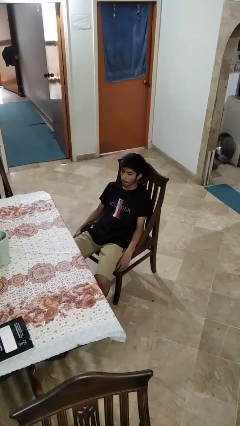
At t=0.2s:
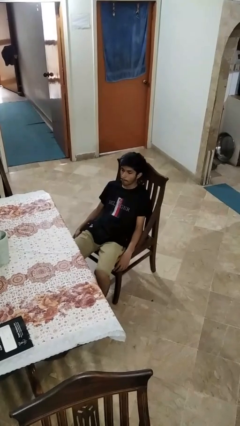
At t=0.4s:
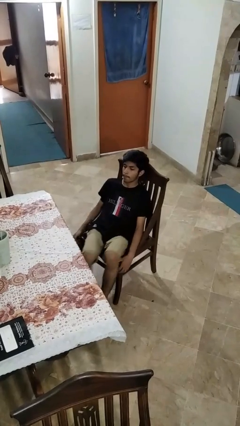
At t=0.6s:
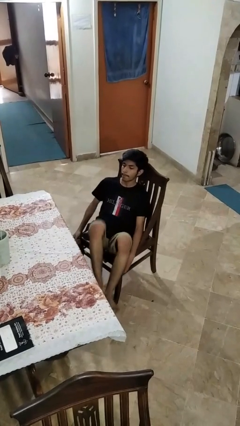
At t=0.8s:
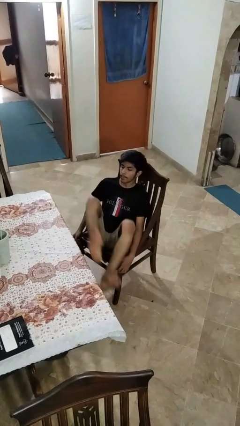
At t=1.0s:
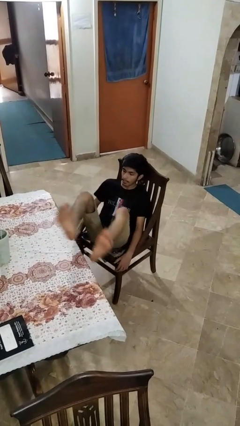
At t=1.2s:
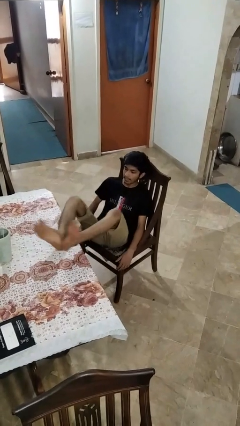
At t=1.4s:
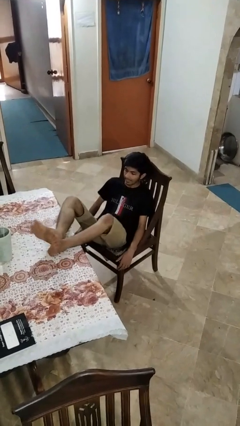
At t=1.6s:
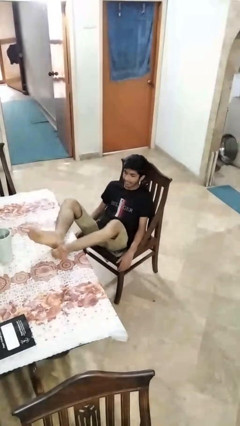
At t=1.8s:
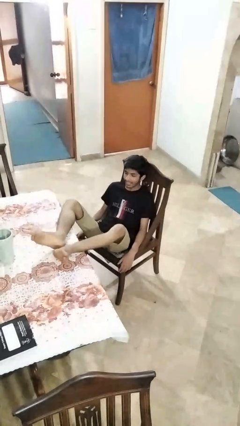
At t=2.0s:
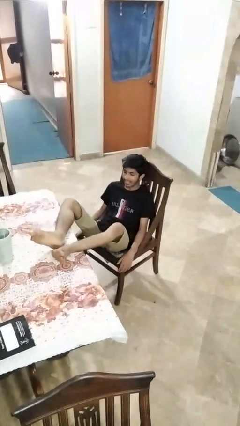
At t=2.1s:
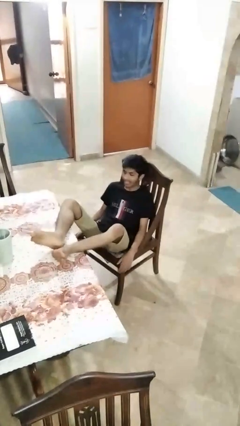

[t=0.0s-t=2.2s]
person puts feet up

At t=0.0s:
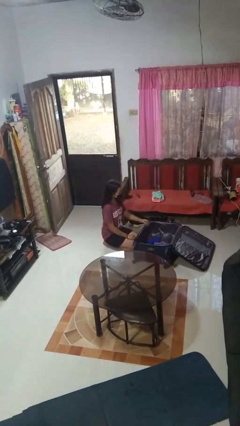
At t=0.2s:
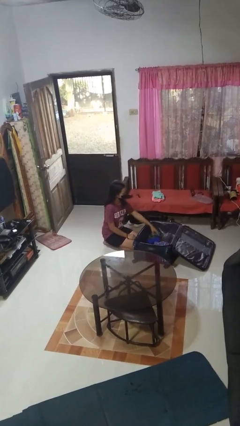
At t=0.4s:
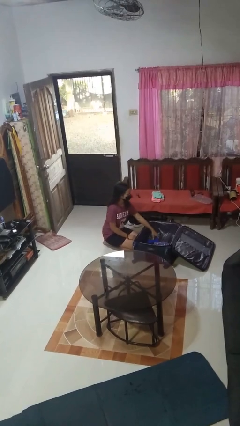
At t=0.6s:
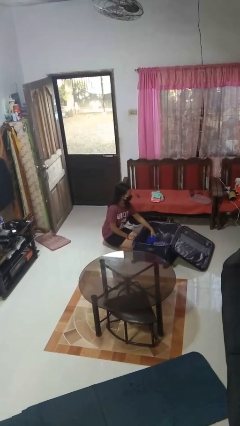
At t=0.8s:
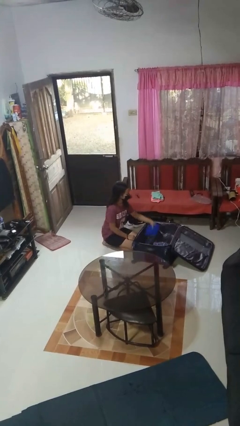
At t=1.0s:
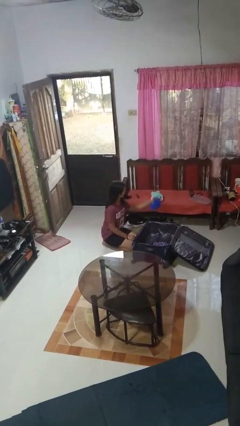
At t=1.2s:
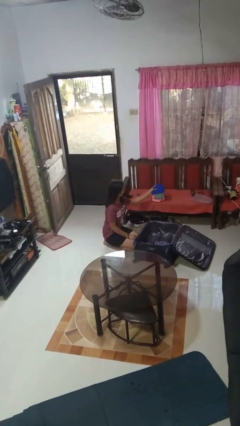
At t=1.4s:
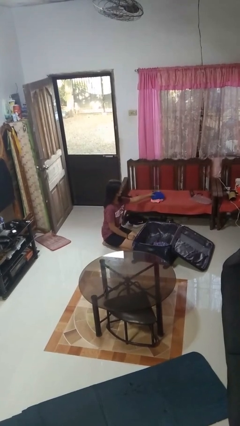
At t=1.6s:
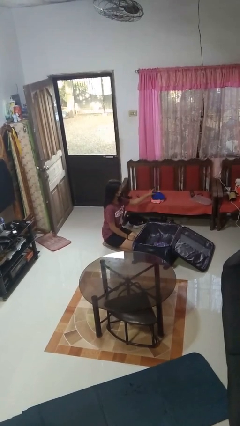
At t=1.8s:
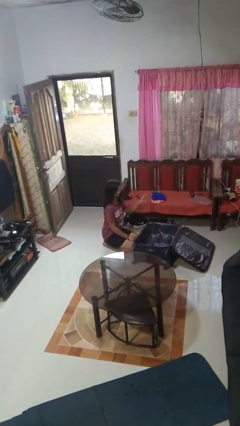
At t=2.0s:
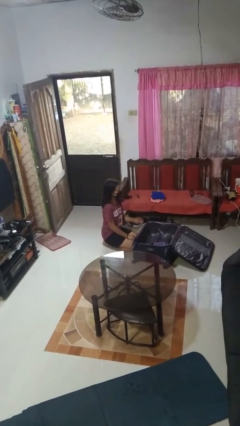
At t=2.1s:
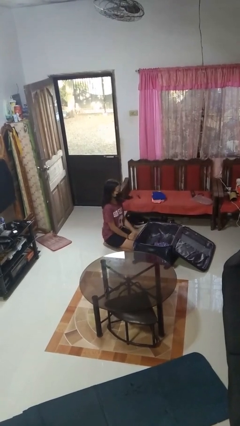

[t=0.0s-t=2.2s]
person unloads clothes from suitcase

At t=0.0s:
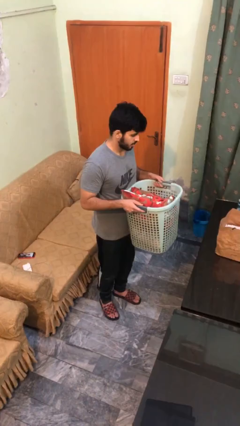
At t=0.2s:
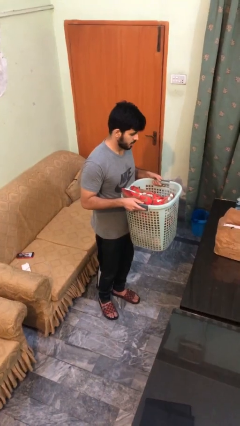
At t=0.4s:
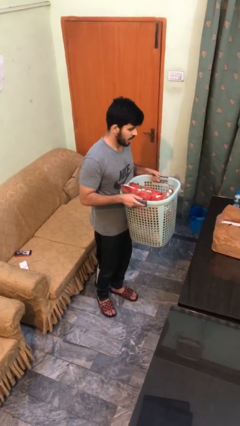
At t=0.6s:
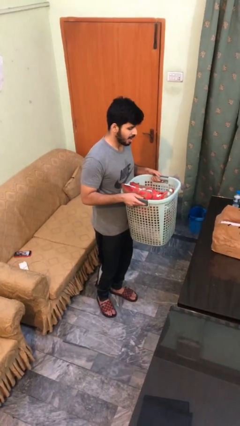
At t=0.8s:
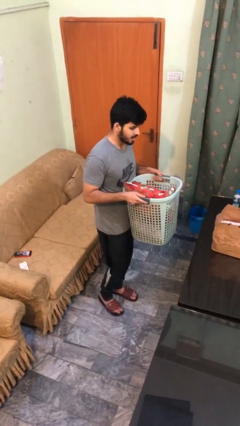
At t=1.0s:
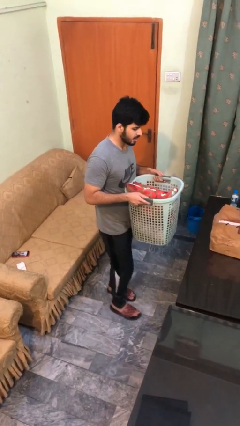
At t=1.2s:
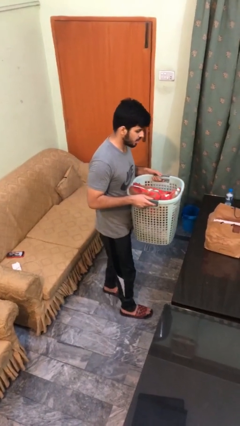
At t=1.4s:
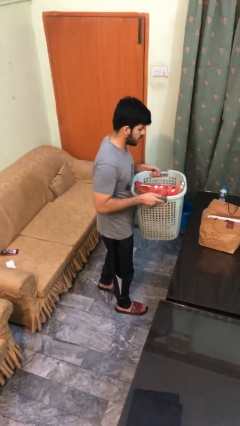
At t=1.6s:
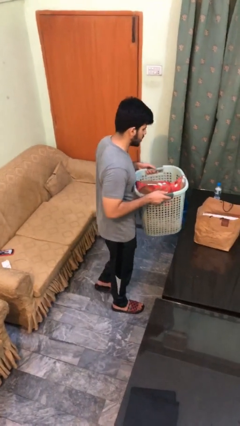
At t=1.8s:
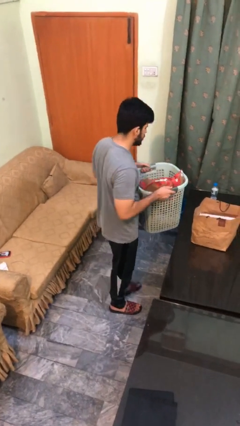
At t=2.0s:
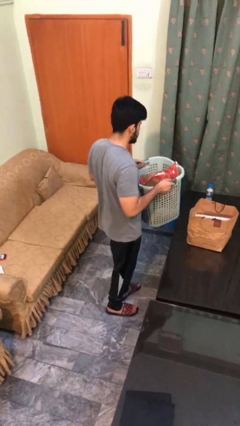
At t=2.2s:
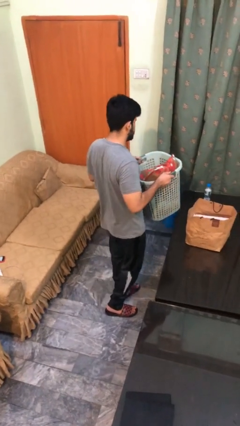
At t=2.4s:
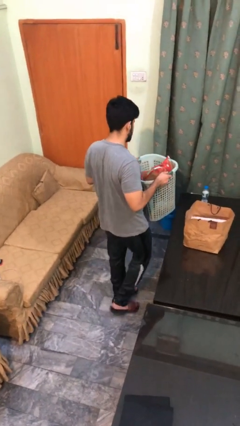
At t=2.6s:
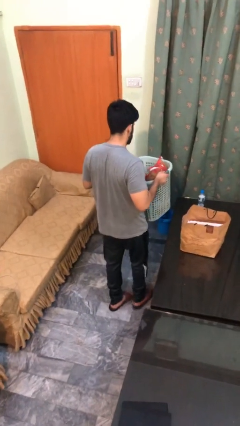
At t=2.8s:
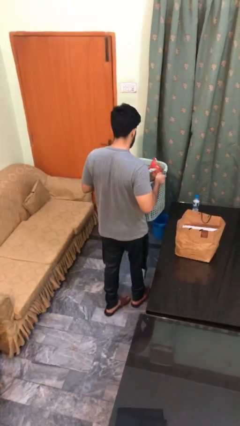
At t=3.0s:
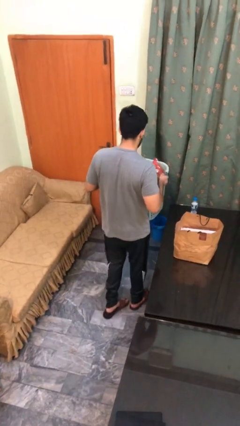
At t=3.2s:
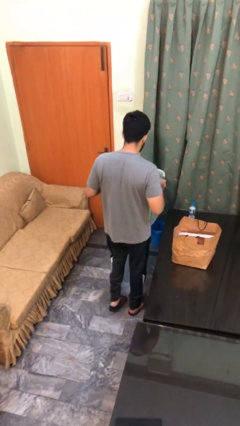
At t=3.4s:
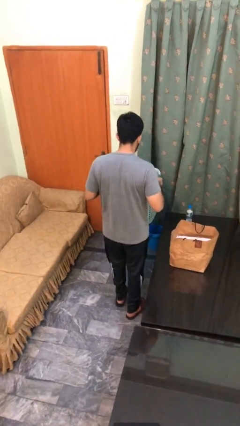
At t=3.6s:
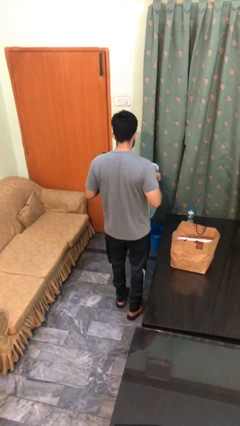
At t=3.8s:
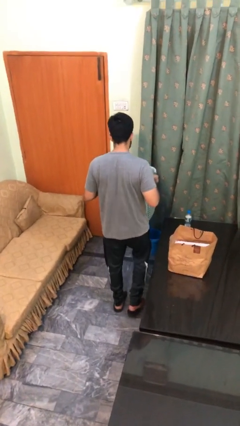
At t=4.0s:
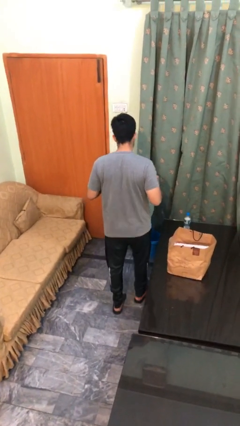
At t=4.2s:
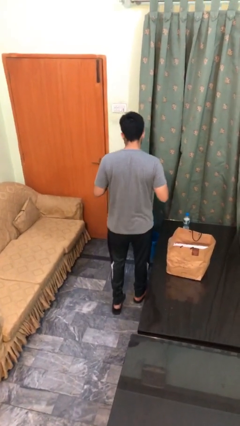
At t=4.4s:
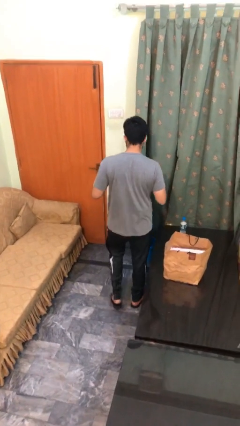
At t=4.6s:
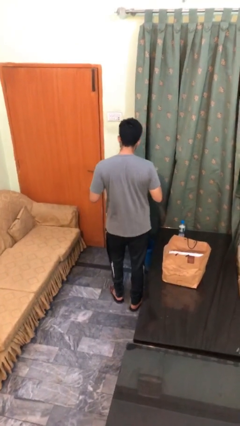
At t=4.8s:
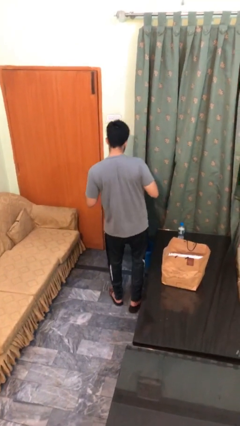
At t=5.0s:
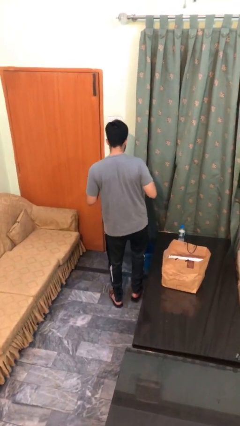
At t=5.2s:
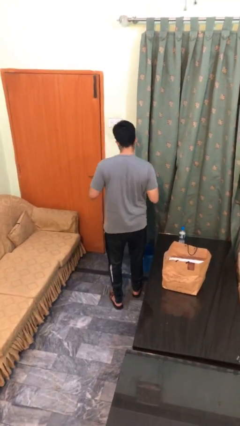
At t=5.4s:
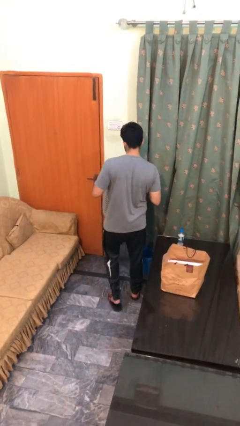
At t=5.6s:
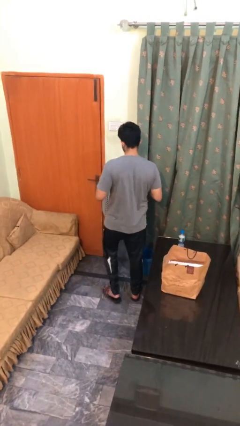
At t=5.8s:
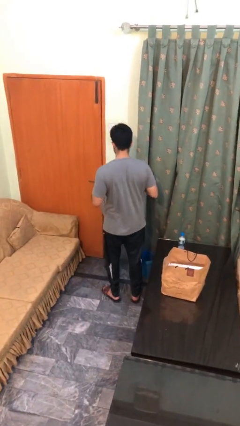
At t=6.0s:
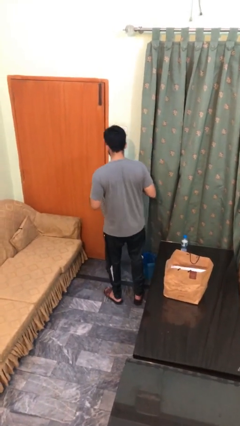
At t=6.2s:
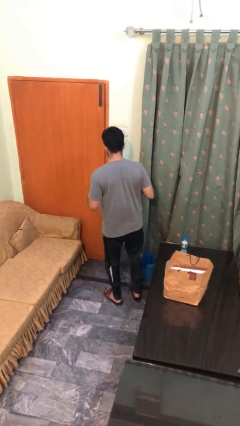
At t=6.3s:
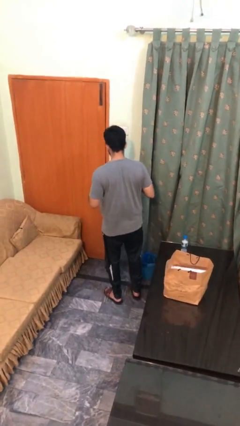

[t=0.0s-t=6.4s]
person carries laundry basket

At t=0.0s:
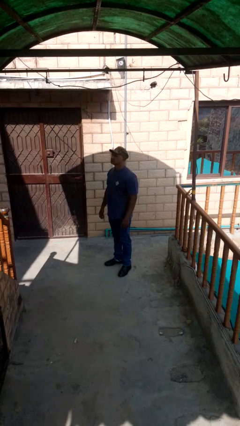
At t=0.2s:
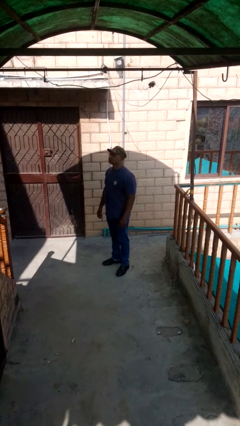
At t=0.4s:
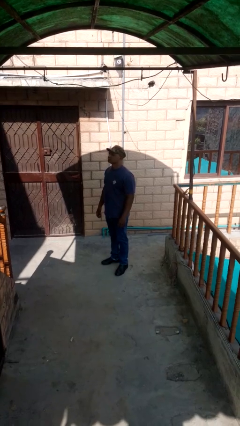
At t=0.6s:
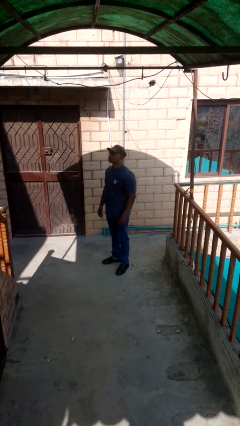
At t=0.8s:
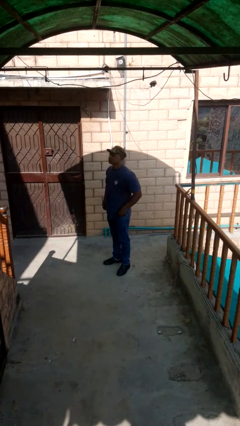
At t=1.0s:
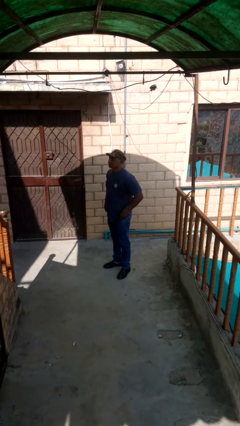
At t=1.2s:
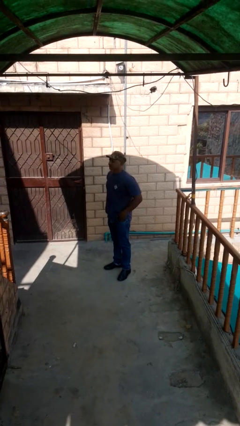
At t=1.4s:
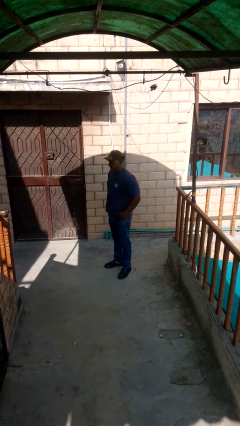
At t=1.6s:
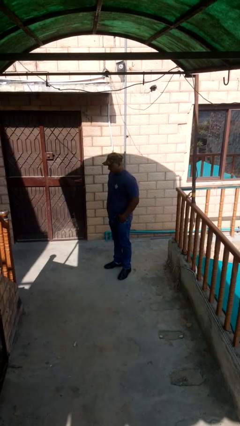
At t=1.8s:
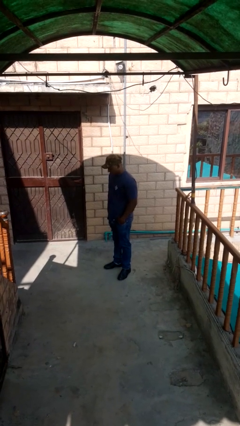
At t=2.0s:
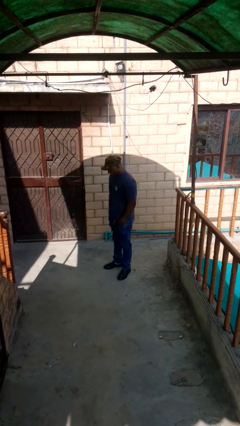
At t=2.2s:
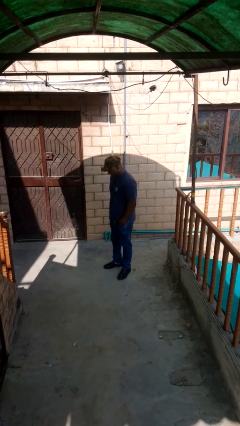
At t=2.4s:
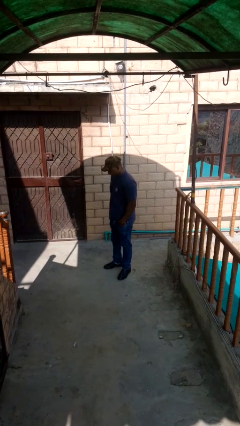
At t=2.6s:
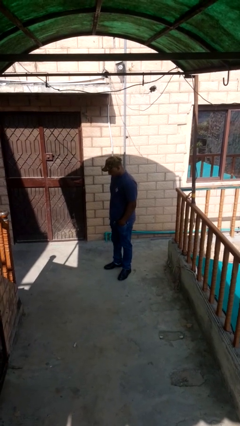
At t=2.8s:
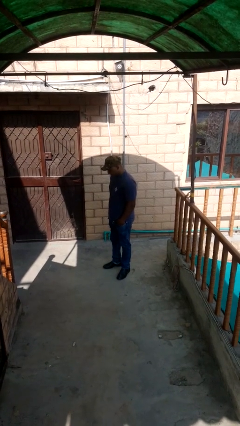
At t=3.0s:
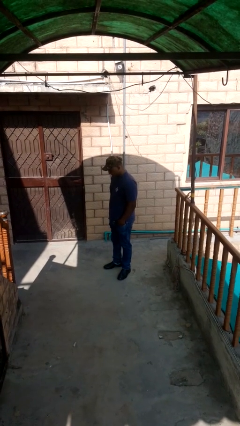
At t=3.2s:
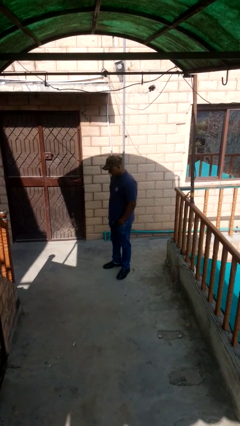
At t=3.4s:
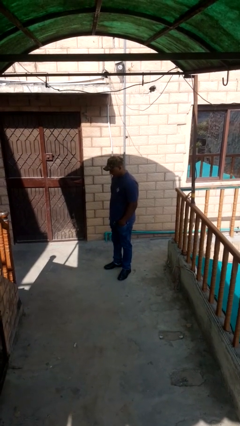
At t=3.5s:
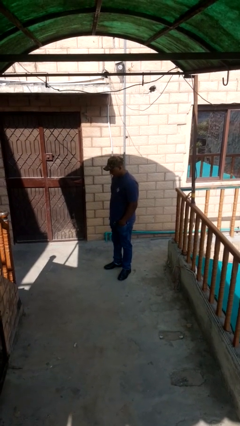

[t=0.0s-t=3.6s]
person puts hands in back pockets

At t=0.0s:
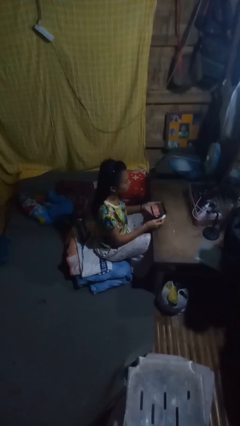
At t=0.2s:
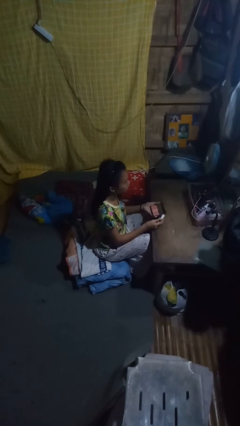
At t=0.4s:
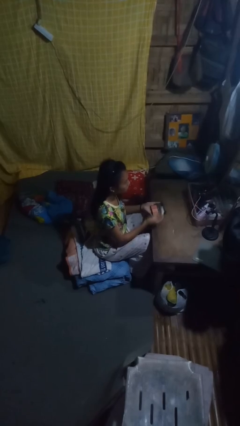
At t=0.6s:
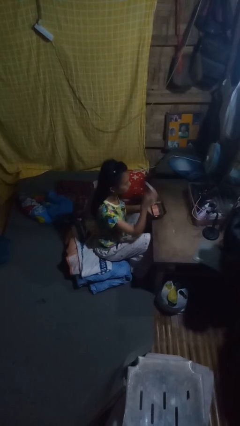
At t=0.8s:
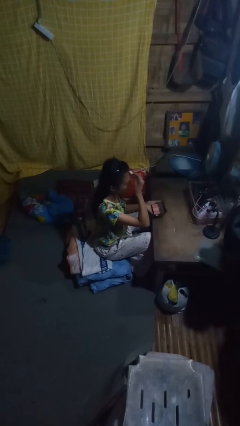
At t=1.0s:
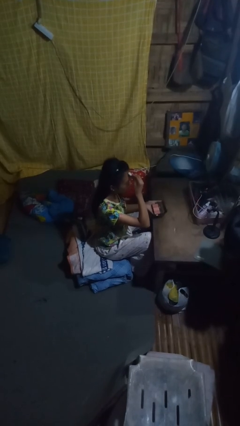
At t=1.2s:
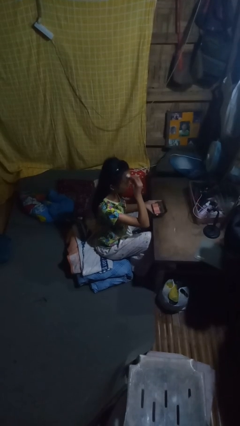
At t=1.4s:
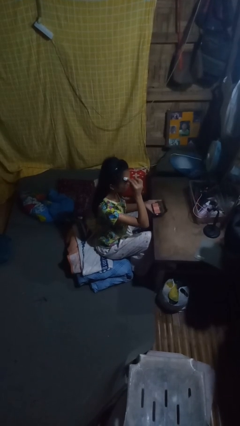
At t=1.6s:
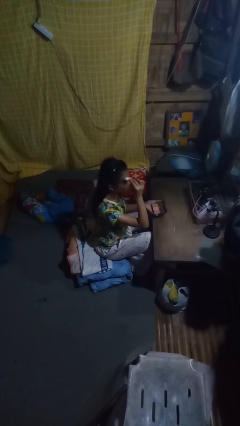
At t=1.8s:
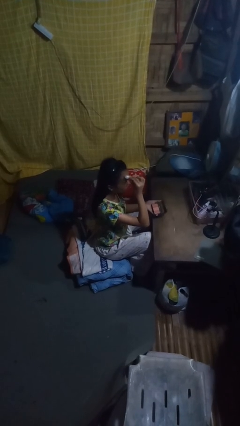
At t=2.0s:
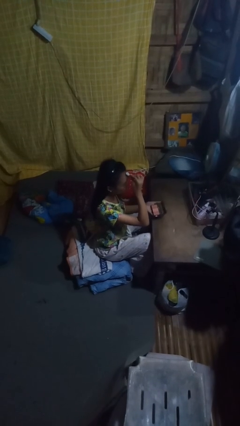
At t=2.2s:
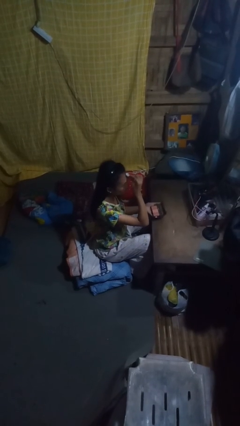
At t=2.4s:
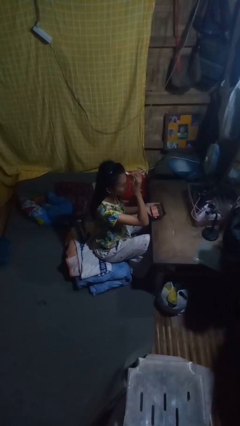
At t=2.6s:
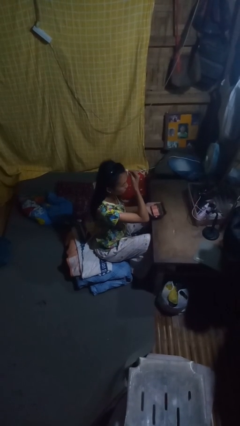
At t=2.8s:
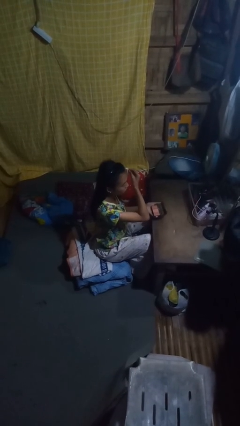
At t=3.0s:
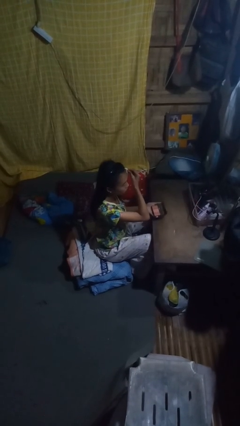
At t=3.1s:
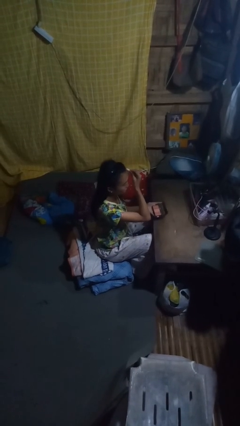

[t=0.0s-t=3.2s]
person applies foundation makeup

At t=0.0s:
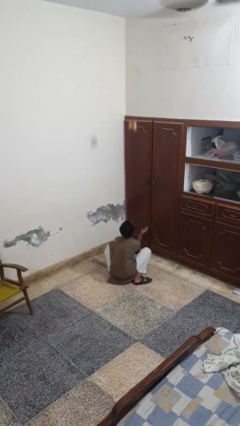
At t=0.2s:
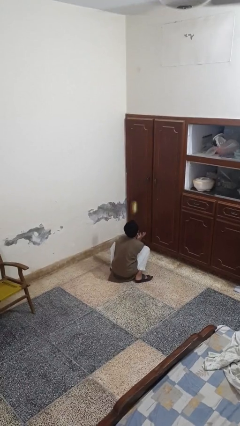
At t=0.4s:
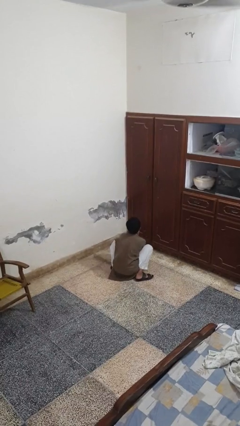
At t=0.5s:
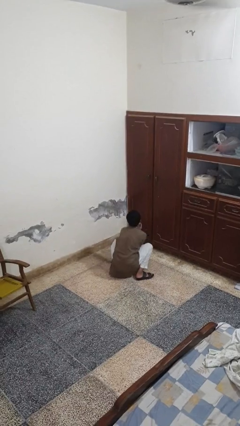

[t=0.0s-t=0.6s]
person catches dropped object
